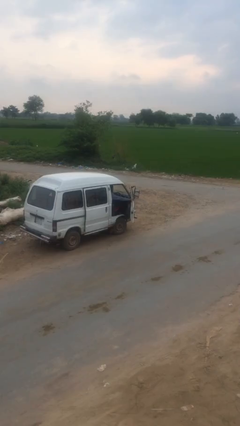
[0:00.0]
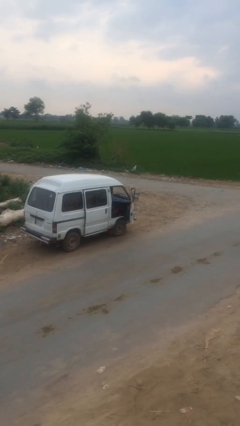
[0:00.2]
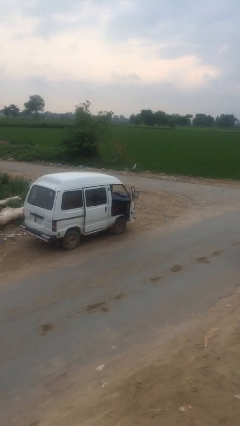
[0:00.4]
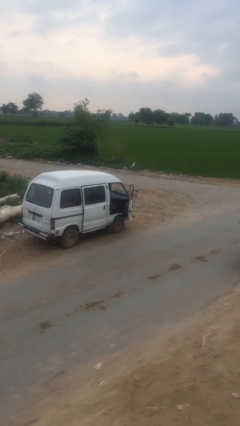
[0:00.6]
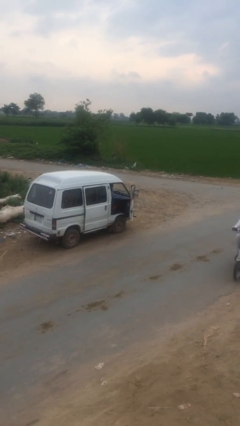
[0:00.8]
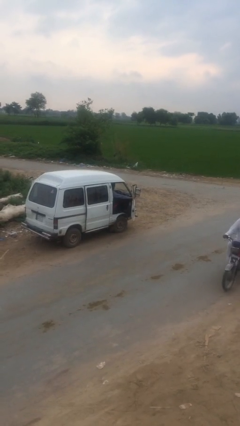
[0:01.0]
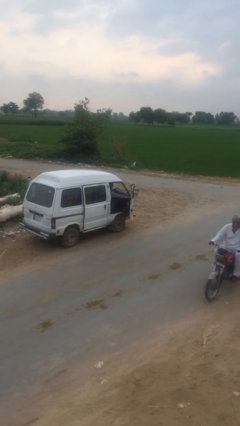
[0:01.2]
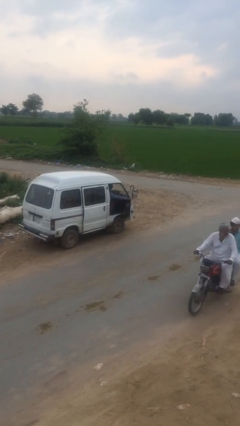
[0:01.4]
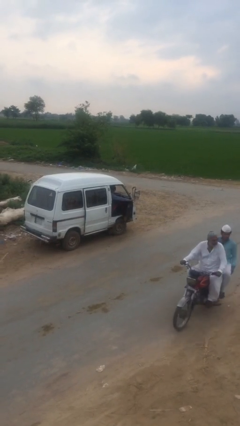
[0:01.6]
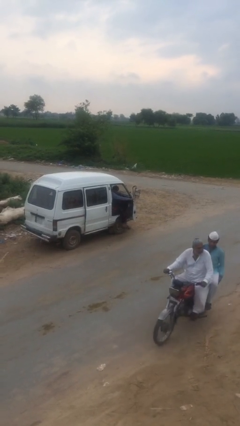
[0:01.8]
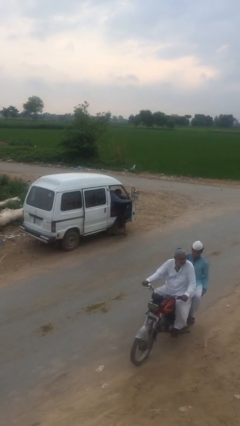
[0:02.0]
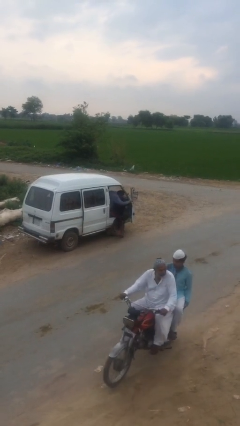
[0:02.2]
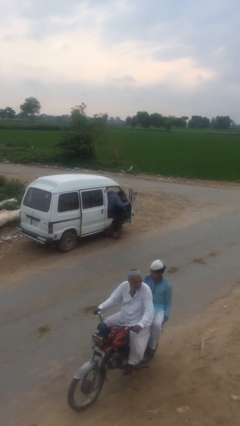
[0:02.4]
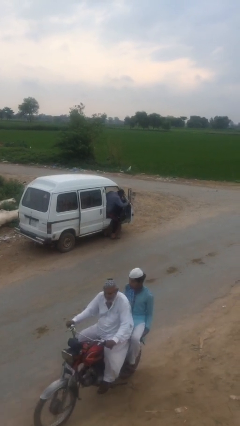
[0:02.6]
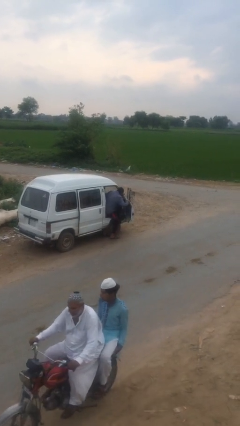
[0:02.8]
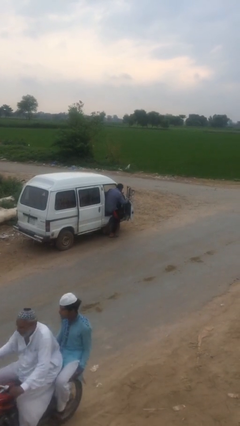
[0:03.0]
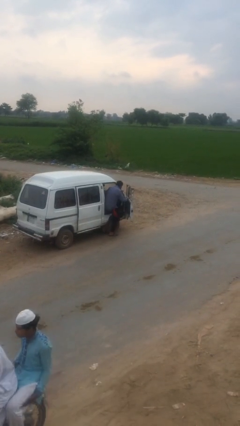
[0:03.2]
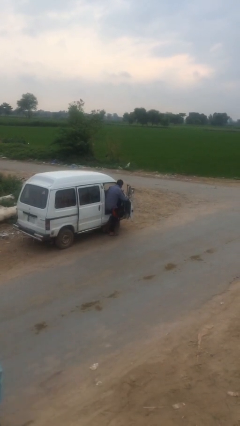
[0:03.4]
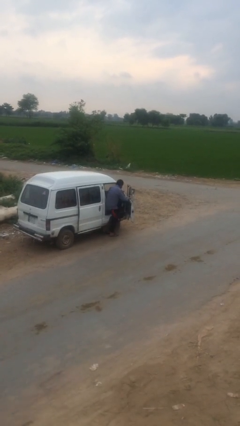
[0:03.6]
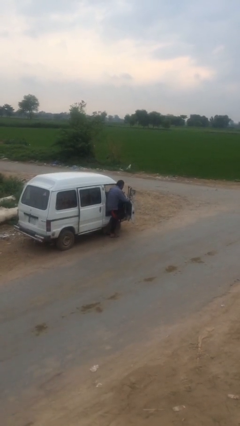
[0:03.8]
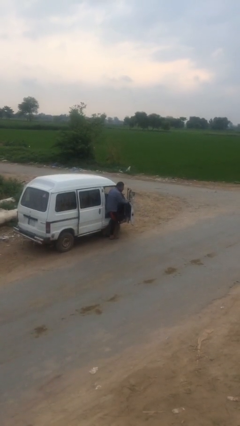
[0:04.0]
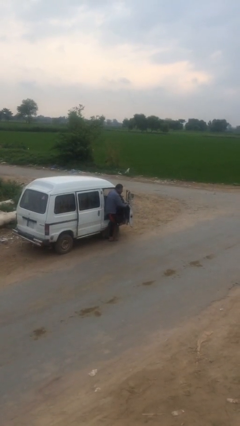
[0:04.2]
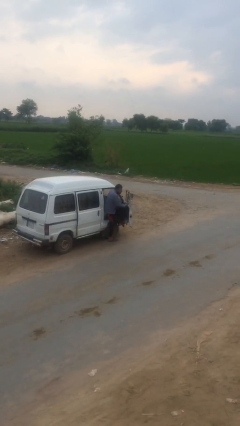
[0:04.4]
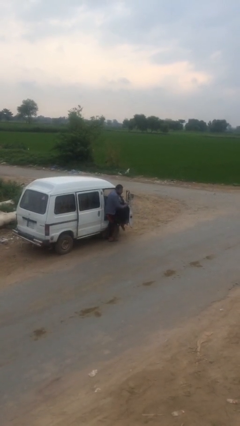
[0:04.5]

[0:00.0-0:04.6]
person exits car

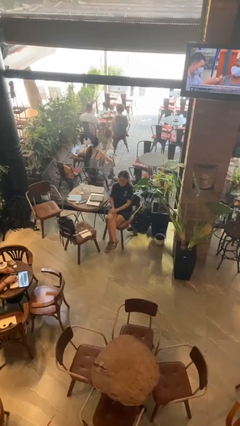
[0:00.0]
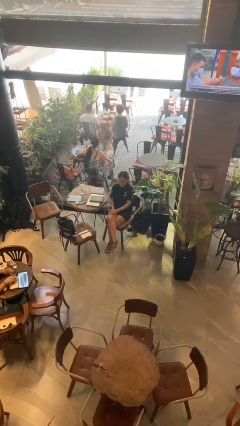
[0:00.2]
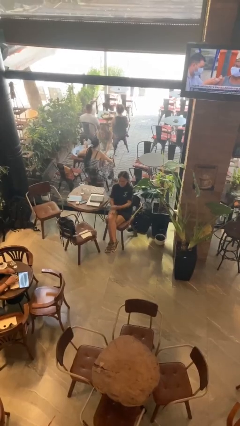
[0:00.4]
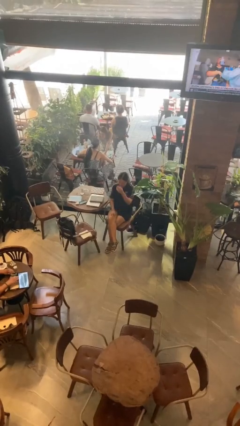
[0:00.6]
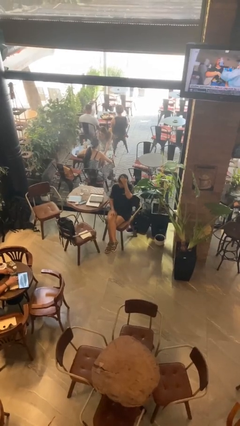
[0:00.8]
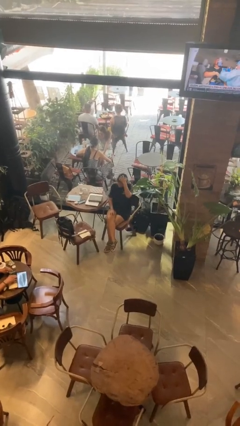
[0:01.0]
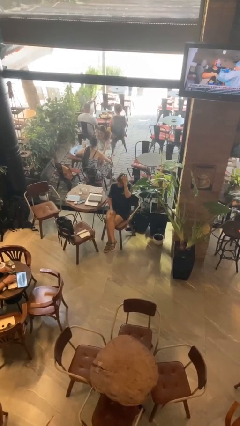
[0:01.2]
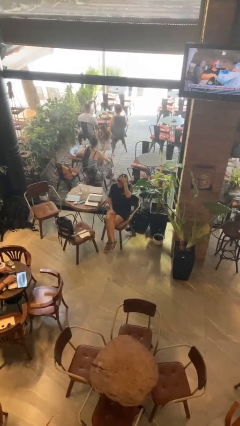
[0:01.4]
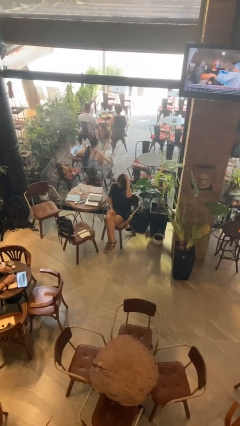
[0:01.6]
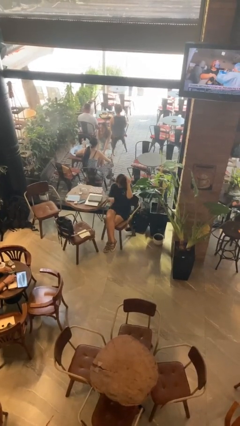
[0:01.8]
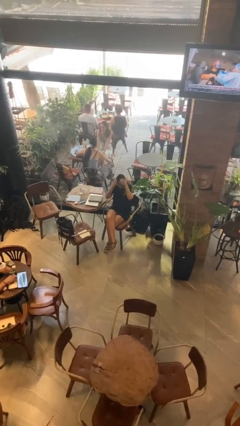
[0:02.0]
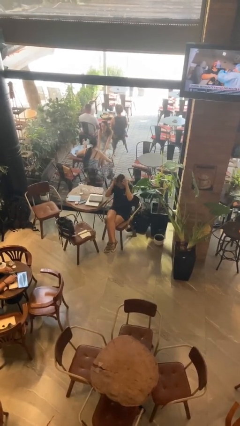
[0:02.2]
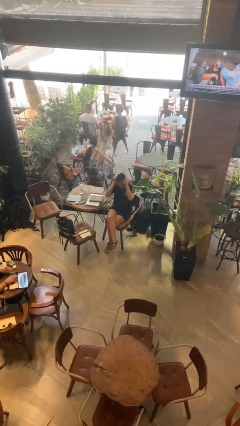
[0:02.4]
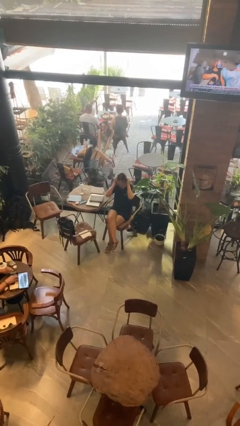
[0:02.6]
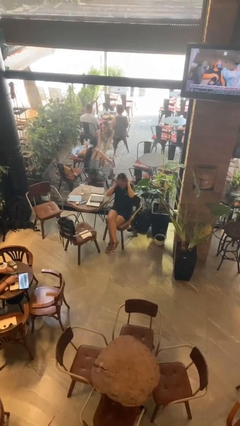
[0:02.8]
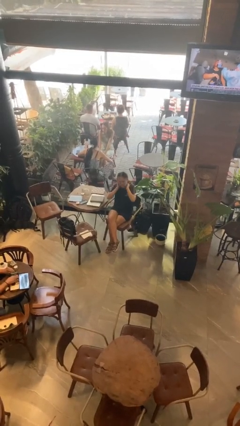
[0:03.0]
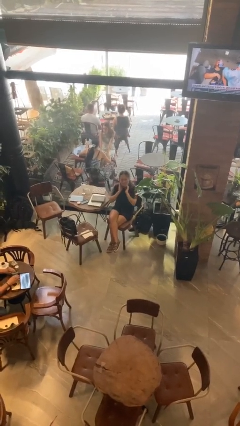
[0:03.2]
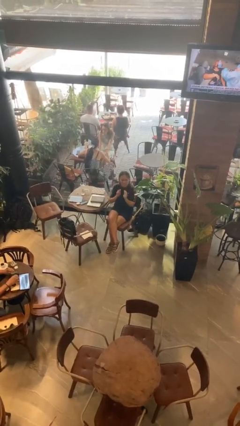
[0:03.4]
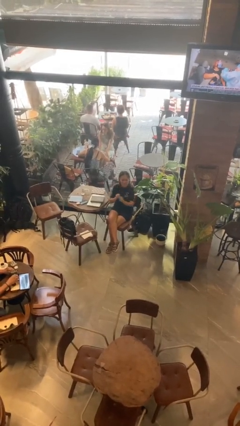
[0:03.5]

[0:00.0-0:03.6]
person scratches face

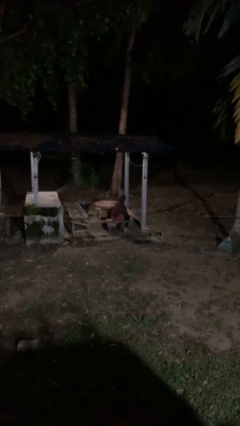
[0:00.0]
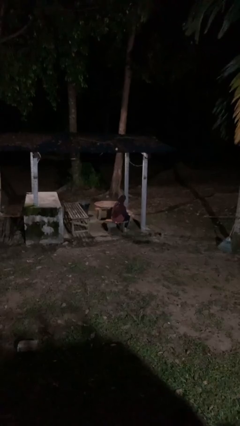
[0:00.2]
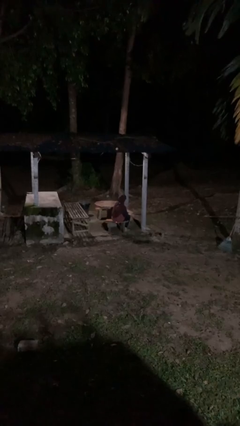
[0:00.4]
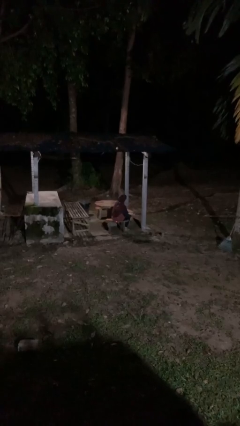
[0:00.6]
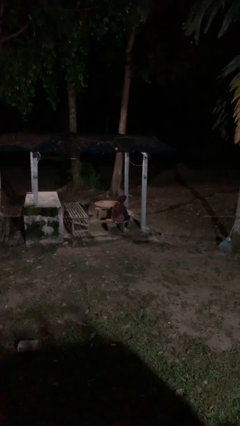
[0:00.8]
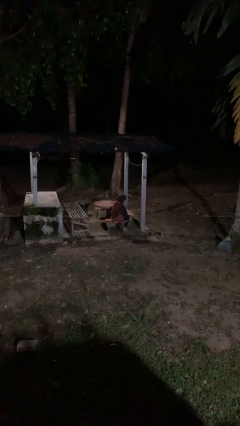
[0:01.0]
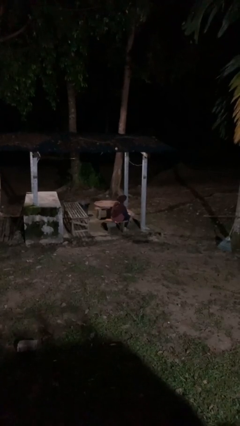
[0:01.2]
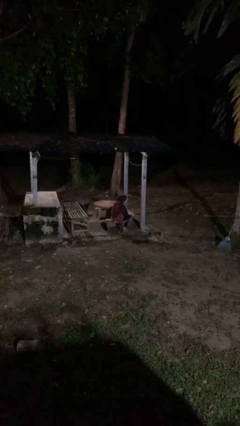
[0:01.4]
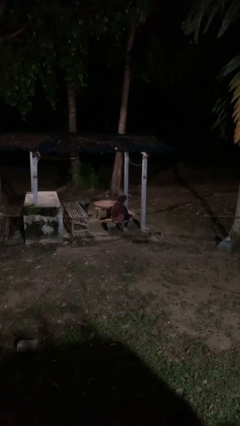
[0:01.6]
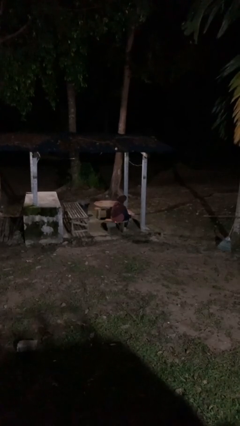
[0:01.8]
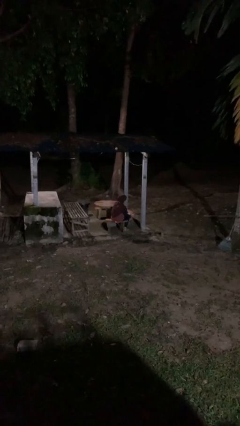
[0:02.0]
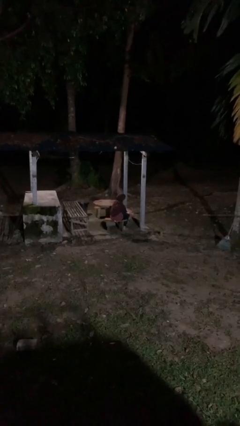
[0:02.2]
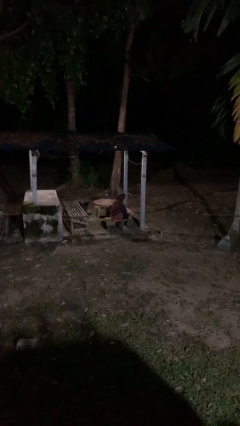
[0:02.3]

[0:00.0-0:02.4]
person rubs foot

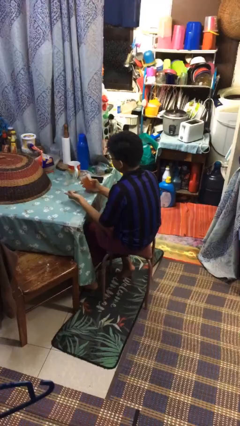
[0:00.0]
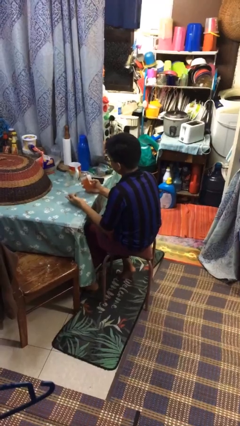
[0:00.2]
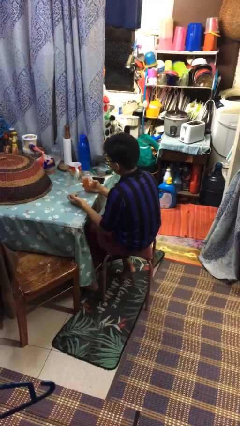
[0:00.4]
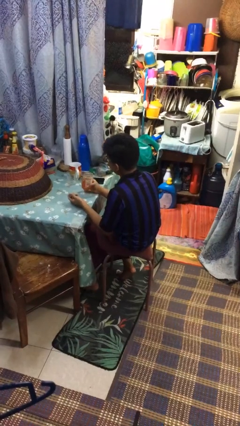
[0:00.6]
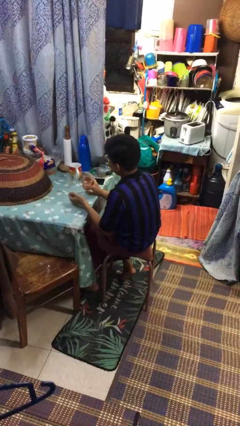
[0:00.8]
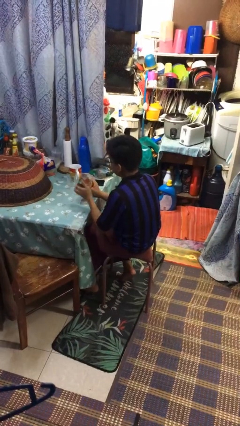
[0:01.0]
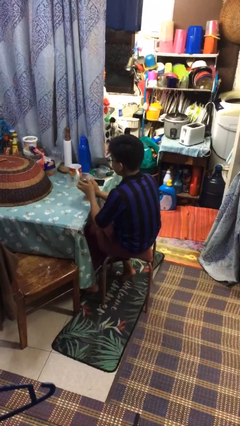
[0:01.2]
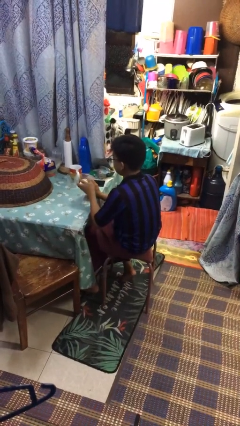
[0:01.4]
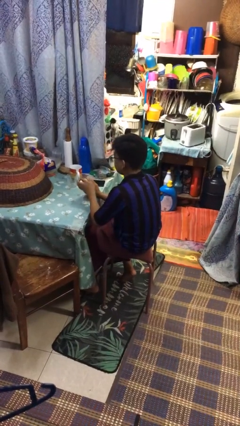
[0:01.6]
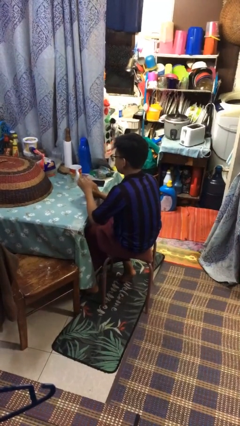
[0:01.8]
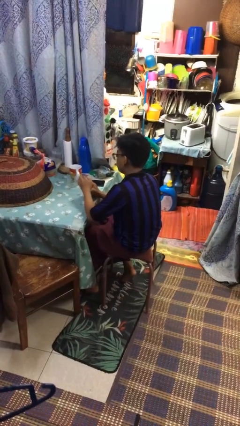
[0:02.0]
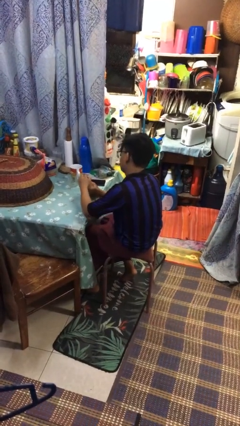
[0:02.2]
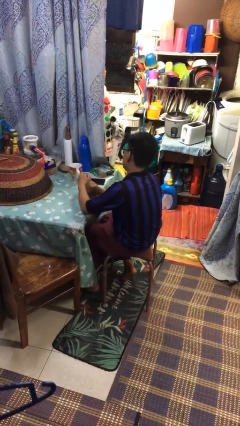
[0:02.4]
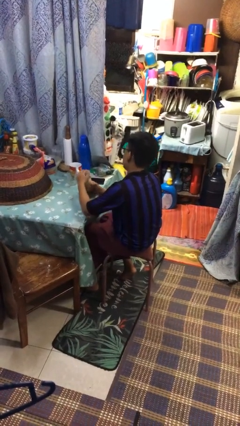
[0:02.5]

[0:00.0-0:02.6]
person closes jar

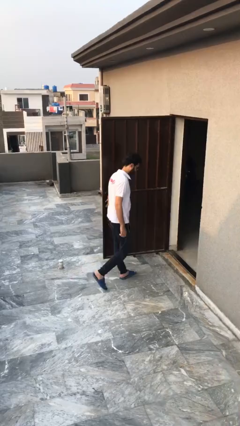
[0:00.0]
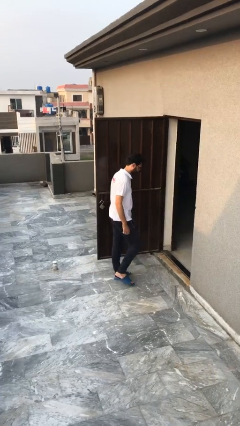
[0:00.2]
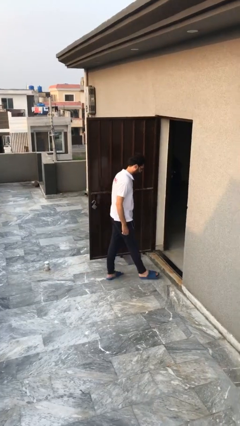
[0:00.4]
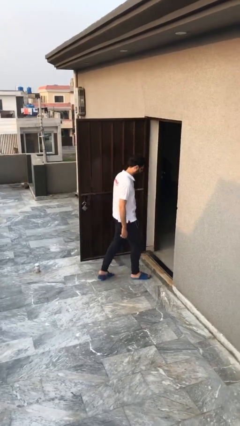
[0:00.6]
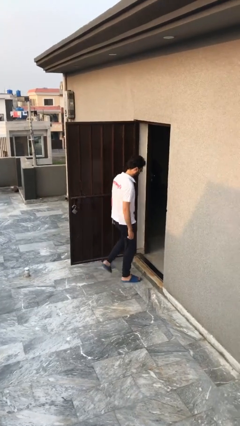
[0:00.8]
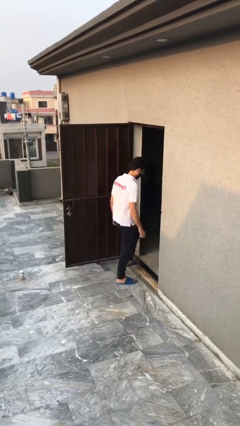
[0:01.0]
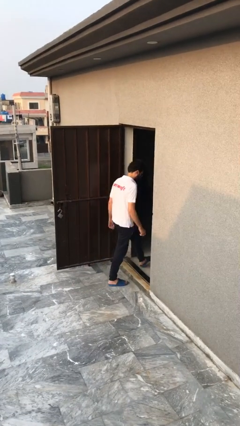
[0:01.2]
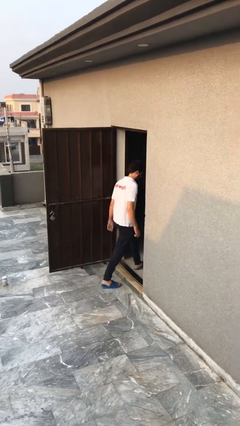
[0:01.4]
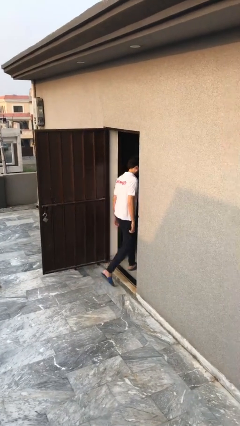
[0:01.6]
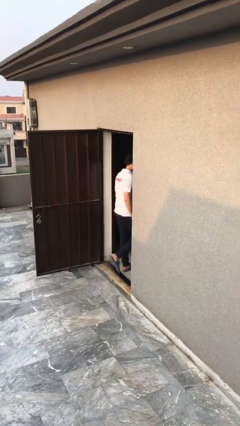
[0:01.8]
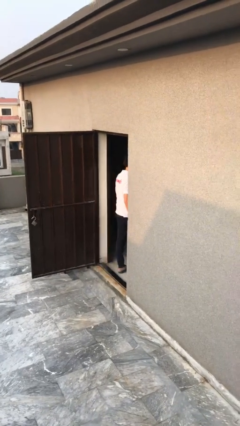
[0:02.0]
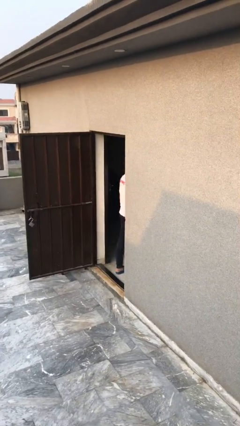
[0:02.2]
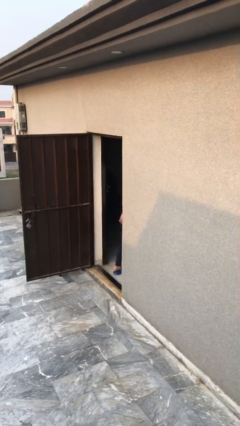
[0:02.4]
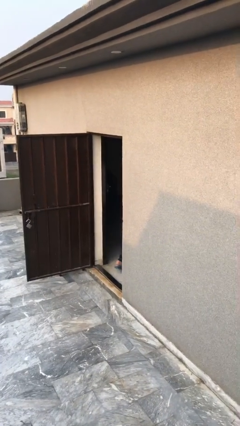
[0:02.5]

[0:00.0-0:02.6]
person exits scene through structure

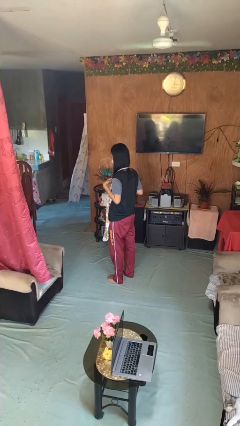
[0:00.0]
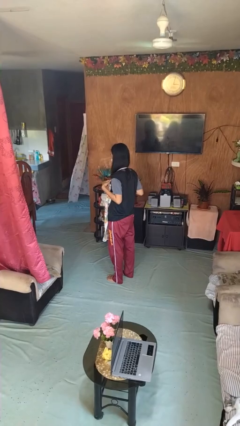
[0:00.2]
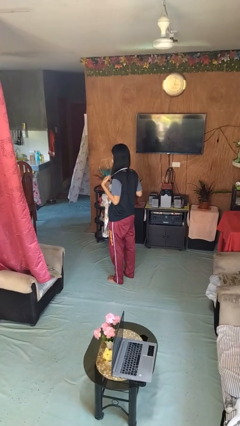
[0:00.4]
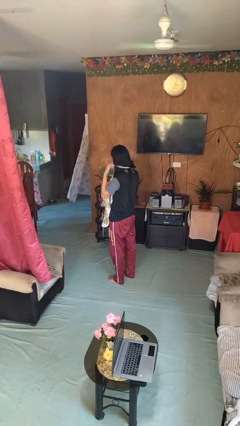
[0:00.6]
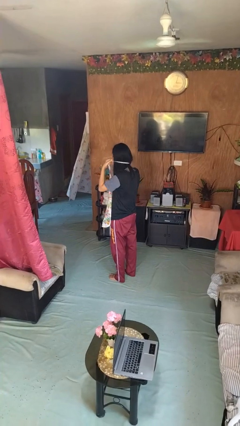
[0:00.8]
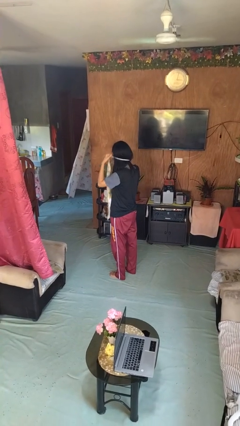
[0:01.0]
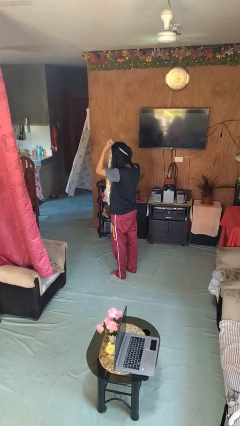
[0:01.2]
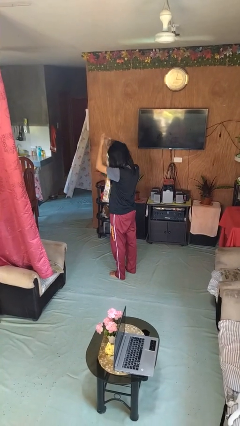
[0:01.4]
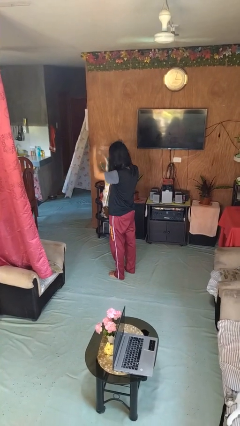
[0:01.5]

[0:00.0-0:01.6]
person takes off apron
